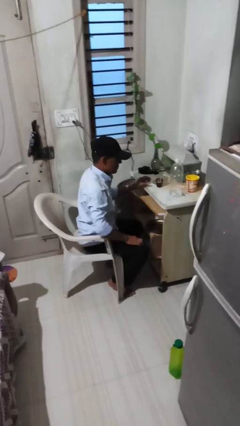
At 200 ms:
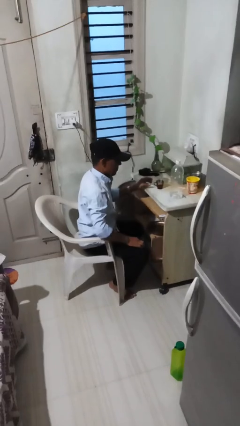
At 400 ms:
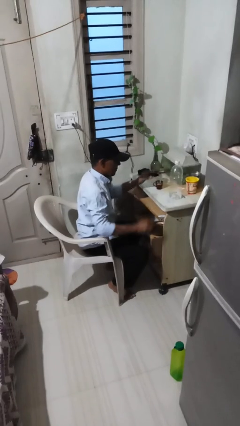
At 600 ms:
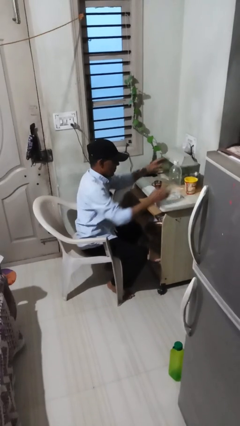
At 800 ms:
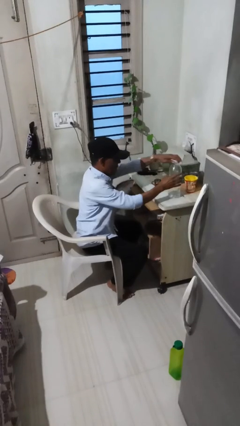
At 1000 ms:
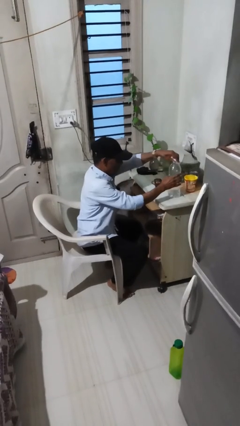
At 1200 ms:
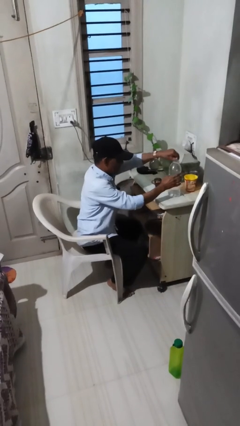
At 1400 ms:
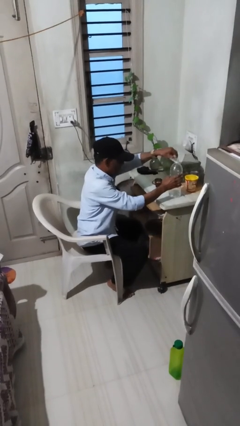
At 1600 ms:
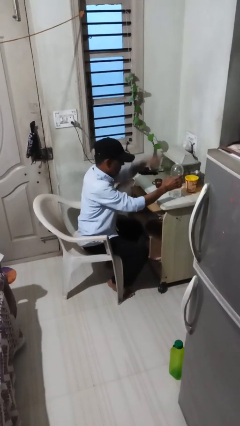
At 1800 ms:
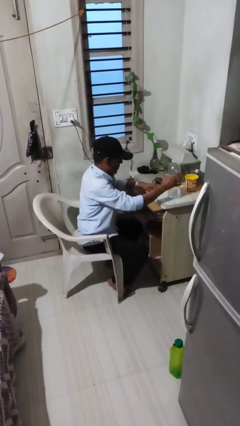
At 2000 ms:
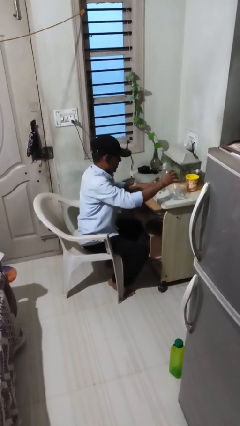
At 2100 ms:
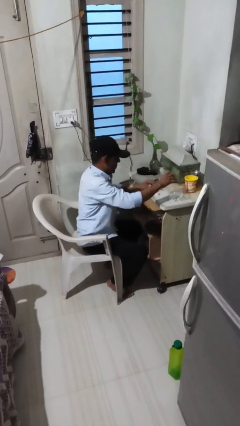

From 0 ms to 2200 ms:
person unscrews lid from bottle

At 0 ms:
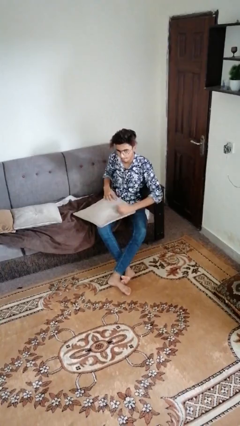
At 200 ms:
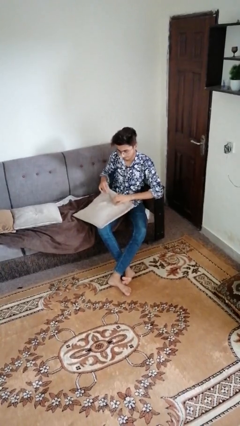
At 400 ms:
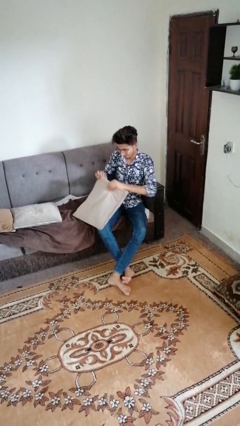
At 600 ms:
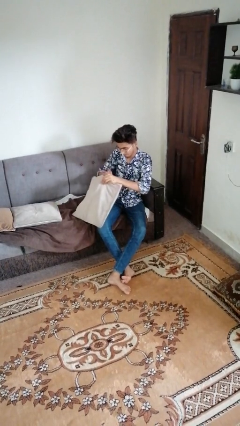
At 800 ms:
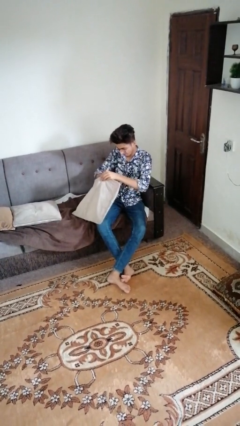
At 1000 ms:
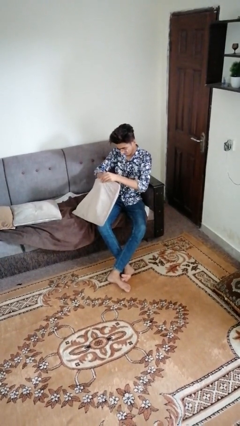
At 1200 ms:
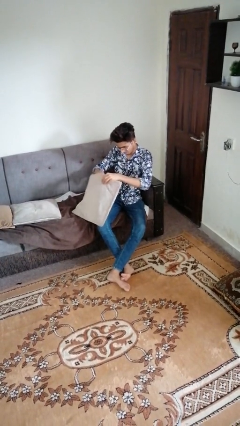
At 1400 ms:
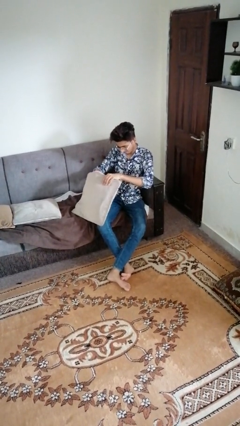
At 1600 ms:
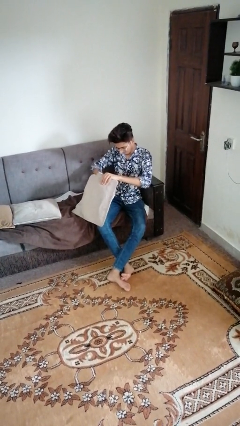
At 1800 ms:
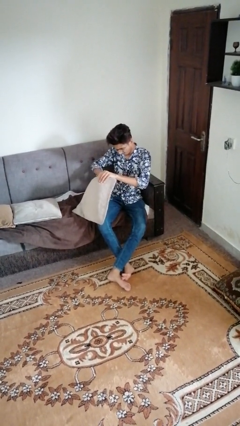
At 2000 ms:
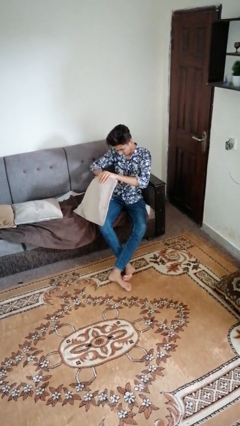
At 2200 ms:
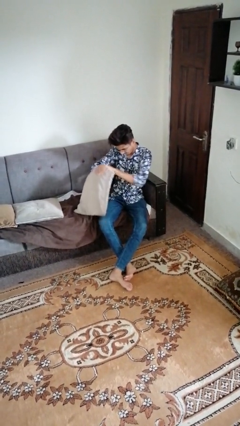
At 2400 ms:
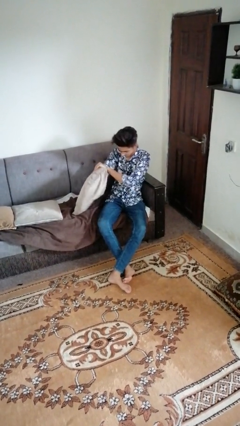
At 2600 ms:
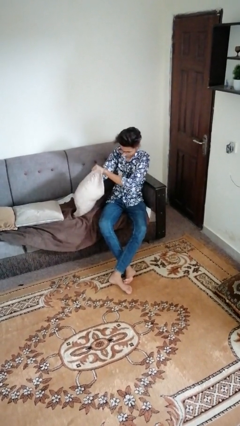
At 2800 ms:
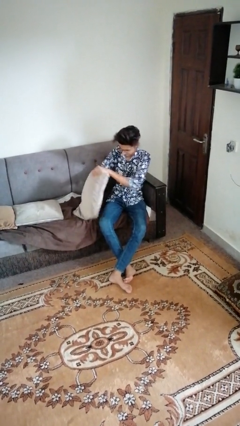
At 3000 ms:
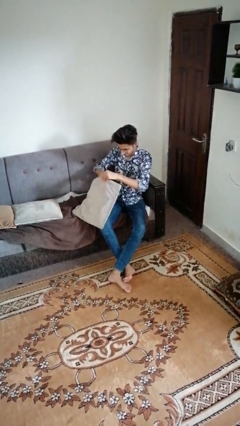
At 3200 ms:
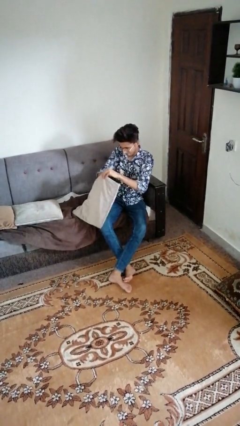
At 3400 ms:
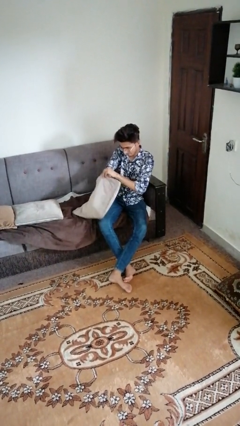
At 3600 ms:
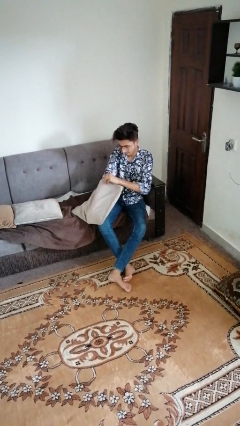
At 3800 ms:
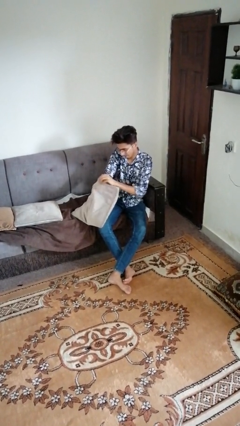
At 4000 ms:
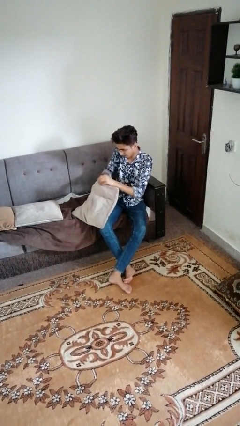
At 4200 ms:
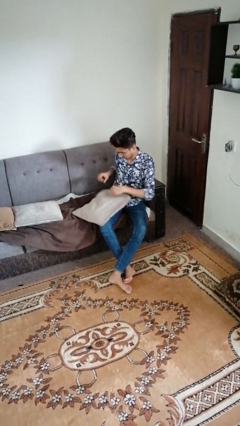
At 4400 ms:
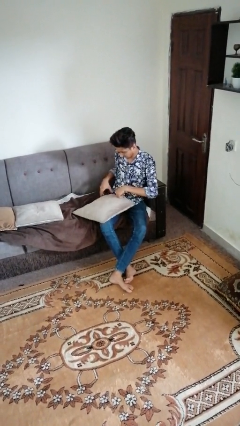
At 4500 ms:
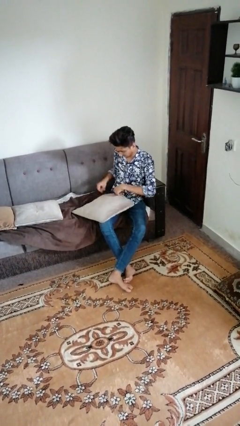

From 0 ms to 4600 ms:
person searches in couch

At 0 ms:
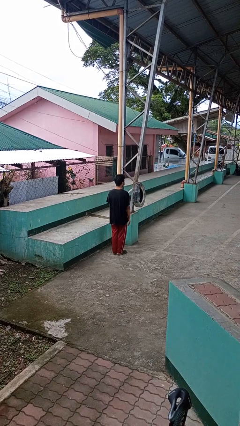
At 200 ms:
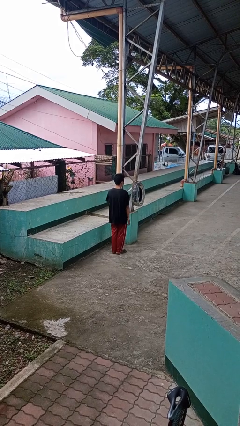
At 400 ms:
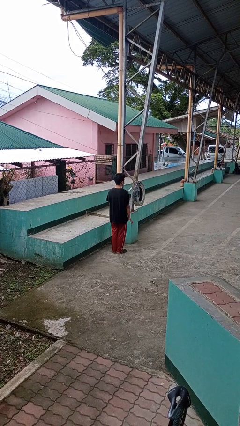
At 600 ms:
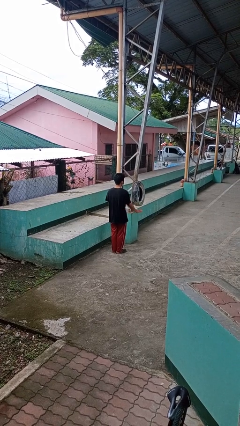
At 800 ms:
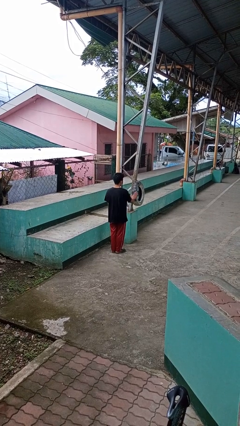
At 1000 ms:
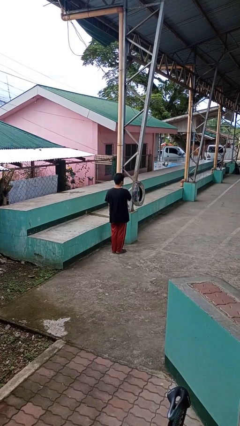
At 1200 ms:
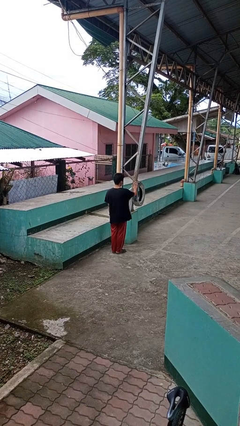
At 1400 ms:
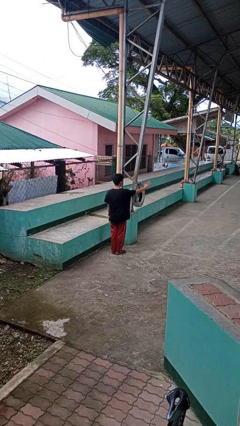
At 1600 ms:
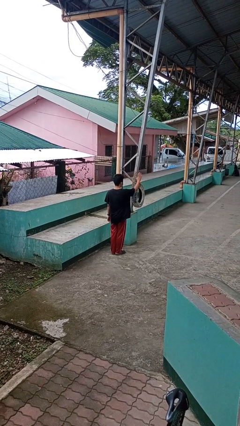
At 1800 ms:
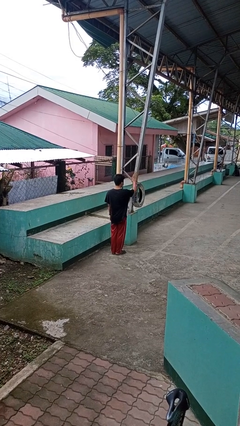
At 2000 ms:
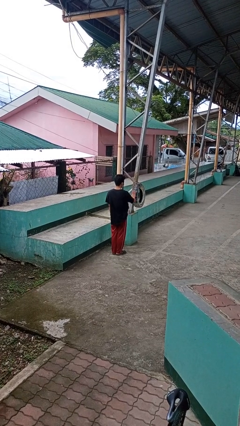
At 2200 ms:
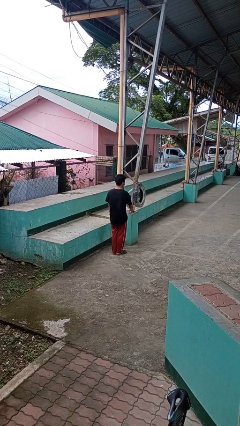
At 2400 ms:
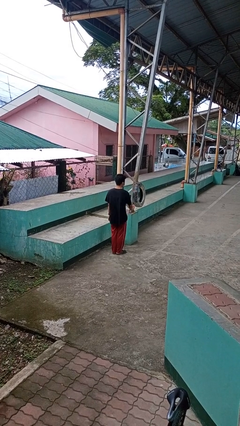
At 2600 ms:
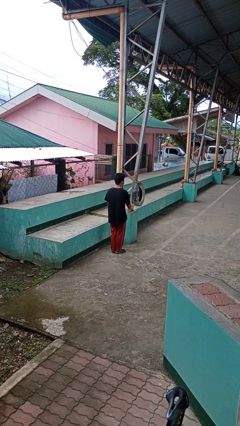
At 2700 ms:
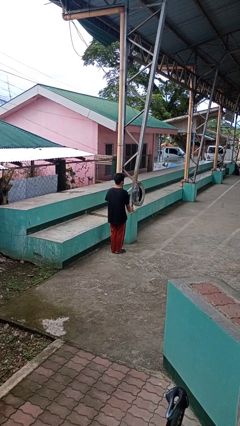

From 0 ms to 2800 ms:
person waves hand over object

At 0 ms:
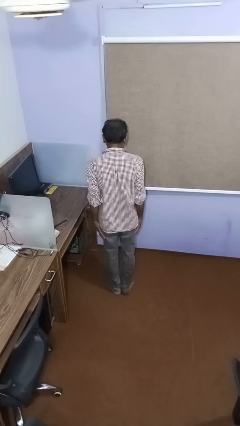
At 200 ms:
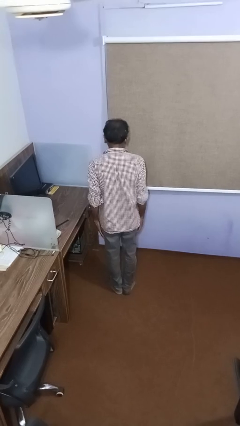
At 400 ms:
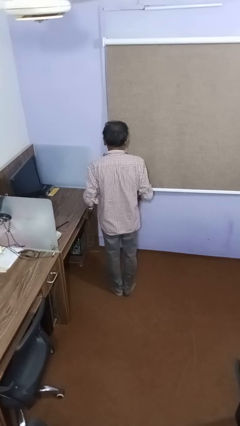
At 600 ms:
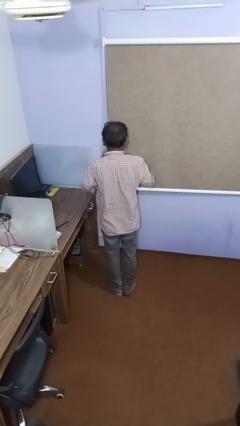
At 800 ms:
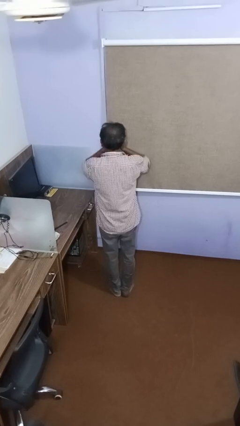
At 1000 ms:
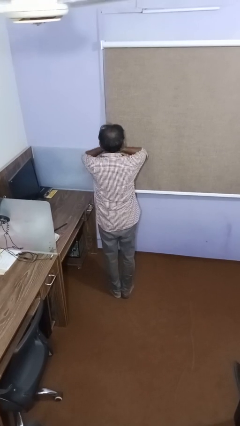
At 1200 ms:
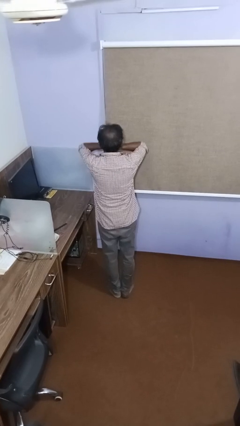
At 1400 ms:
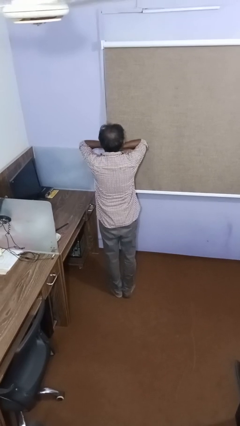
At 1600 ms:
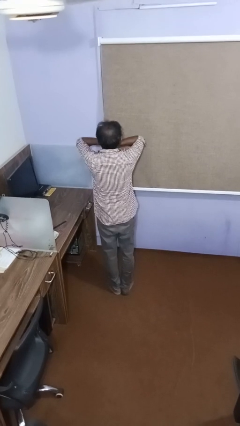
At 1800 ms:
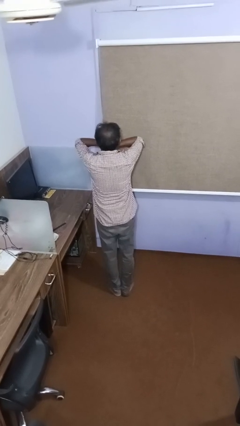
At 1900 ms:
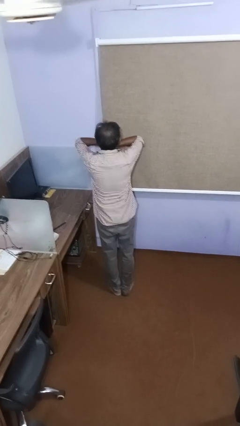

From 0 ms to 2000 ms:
person covers face with hands

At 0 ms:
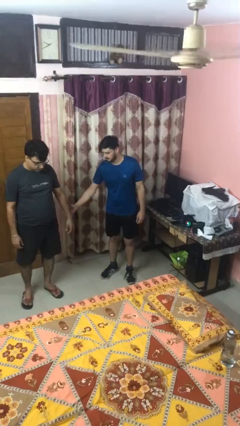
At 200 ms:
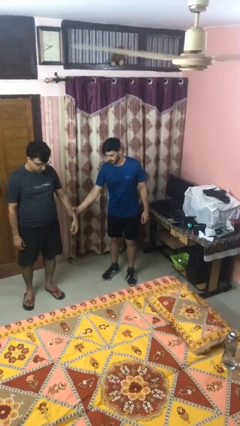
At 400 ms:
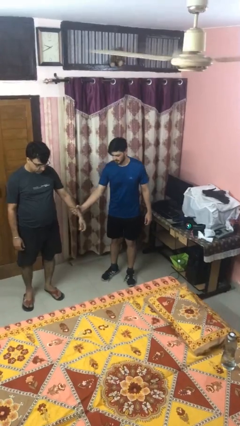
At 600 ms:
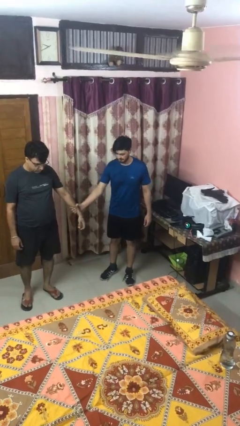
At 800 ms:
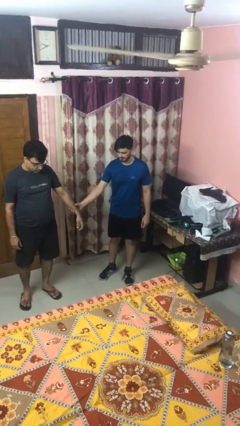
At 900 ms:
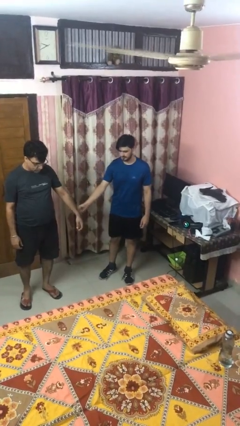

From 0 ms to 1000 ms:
person grabs person by forearm

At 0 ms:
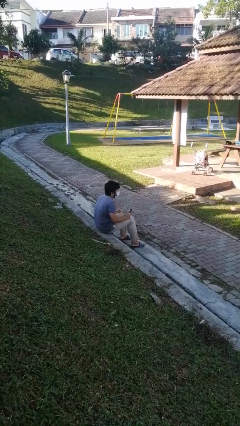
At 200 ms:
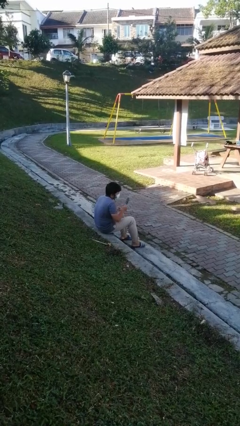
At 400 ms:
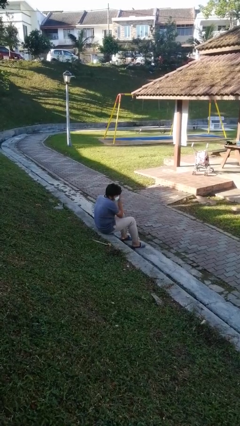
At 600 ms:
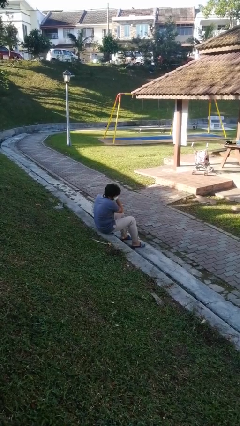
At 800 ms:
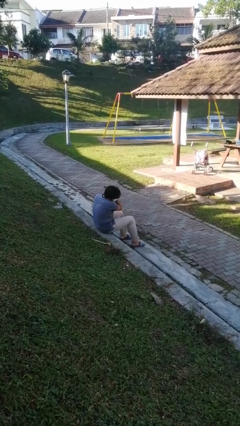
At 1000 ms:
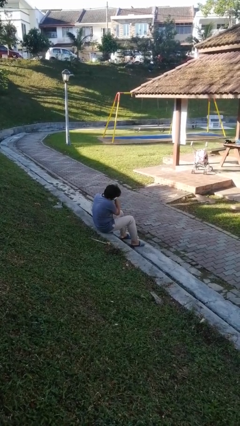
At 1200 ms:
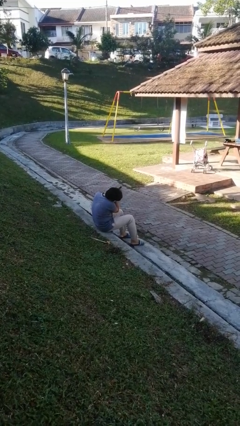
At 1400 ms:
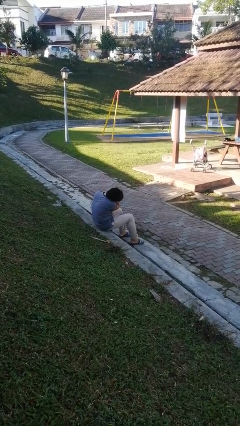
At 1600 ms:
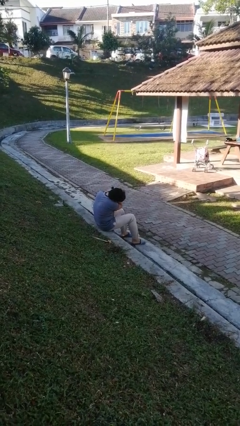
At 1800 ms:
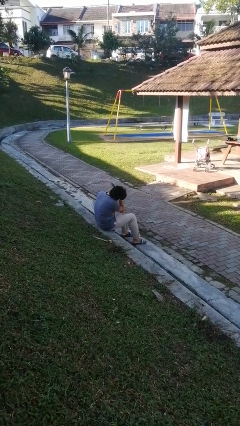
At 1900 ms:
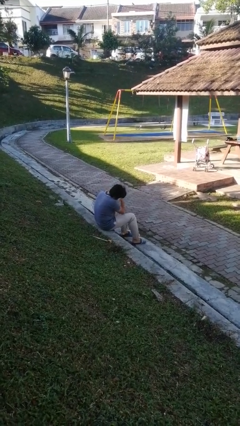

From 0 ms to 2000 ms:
person brushes hair

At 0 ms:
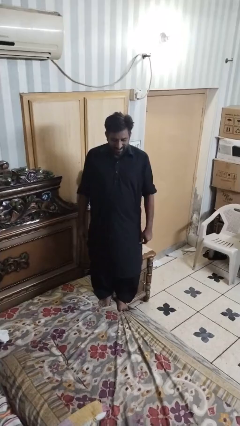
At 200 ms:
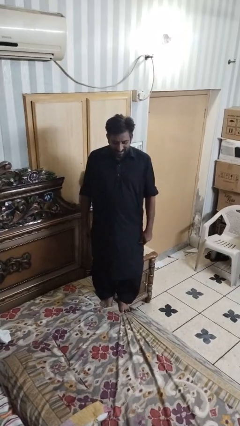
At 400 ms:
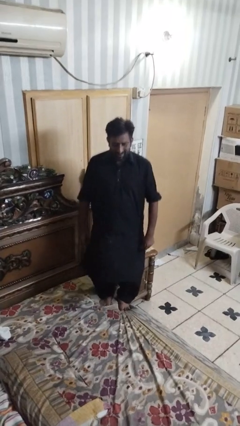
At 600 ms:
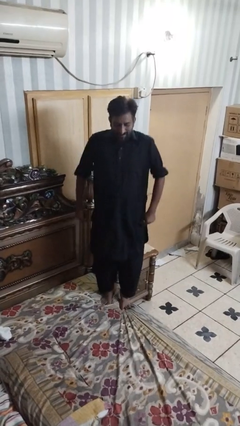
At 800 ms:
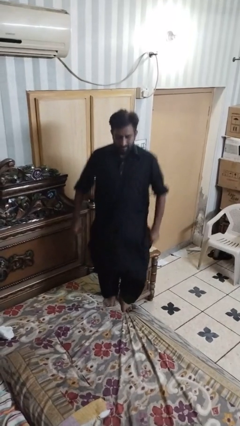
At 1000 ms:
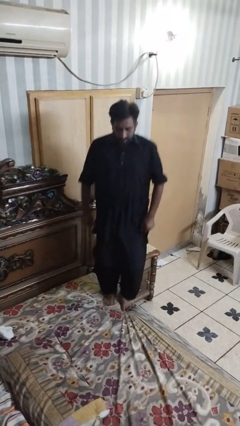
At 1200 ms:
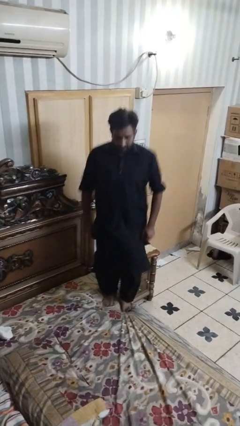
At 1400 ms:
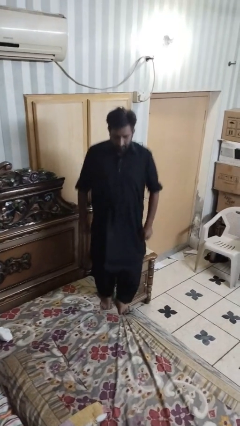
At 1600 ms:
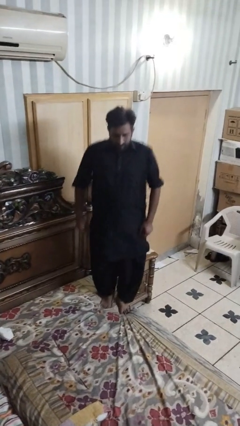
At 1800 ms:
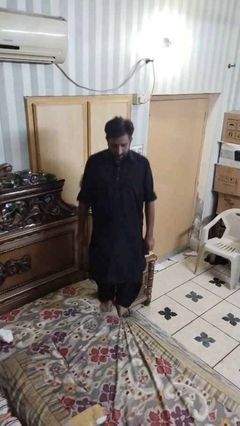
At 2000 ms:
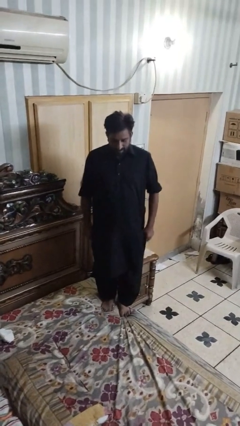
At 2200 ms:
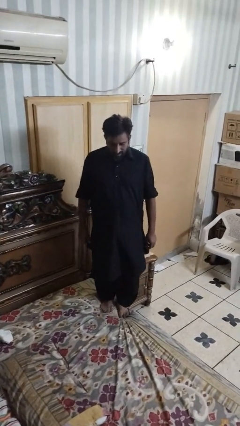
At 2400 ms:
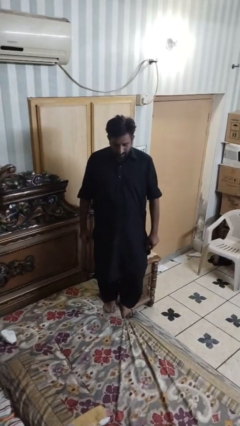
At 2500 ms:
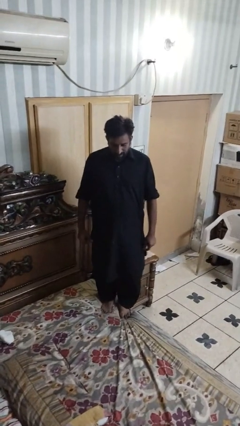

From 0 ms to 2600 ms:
person jumps on bed
